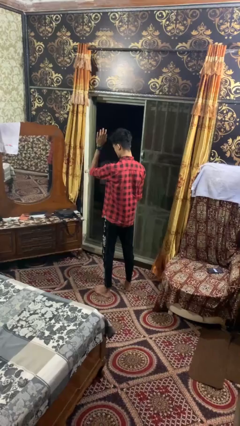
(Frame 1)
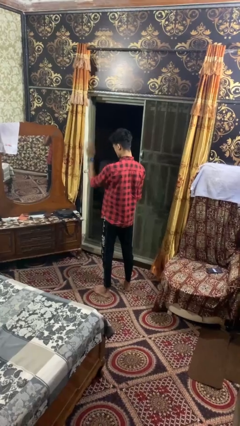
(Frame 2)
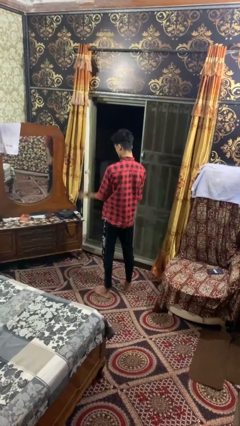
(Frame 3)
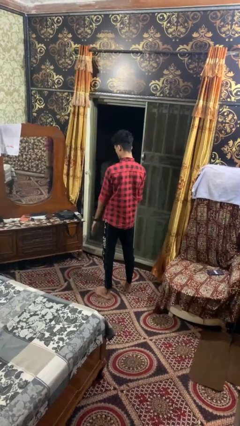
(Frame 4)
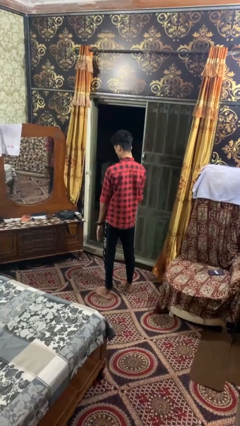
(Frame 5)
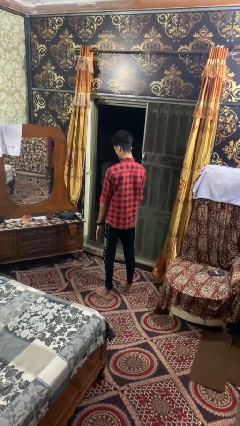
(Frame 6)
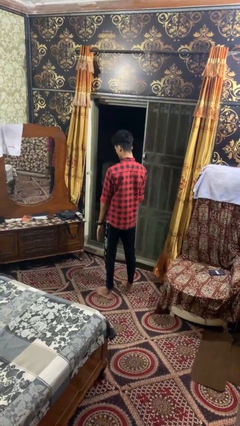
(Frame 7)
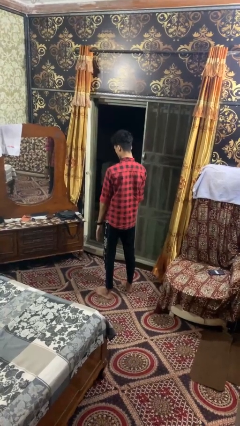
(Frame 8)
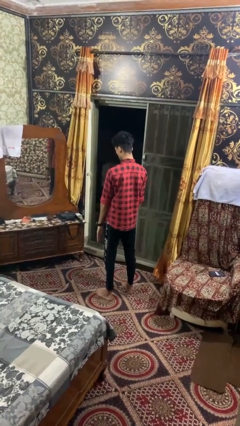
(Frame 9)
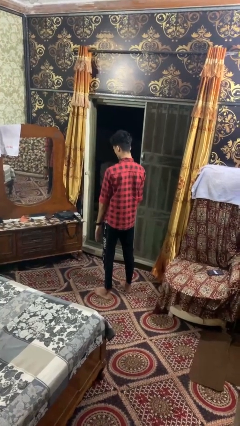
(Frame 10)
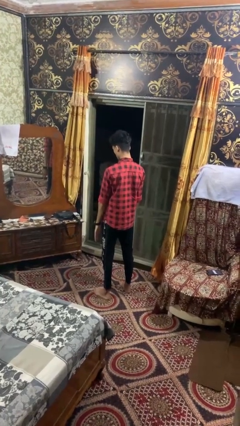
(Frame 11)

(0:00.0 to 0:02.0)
person gestures lower hand

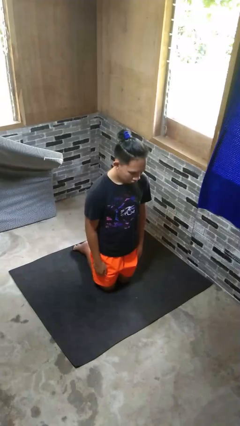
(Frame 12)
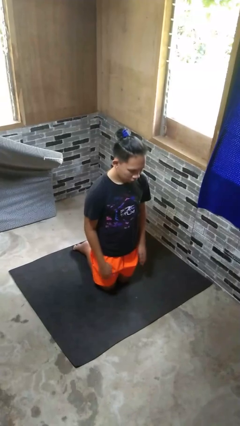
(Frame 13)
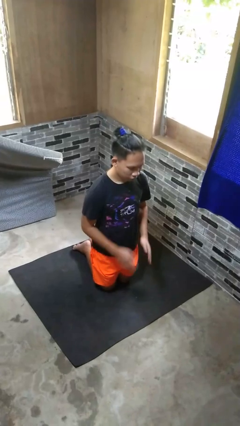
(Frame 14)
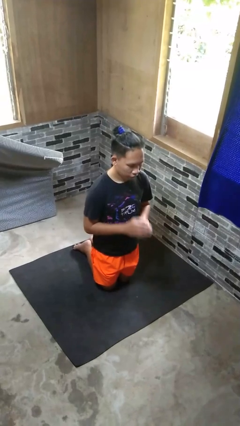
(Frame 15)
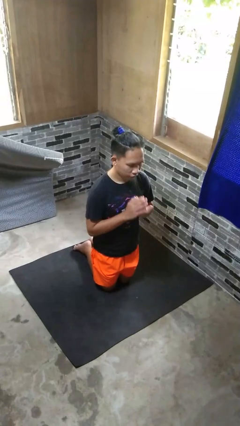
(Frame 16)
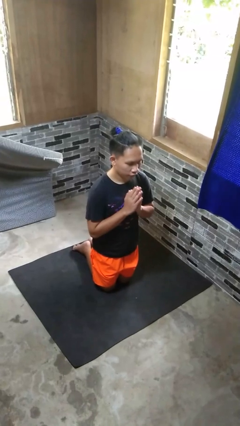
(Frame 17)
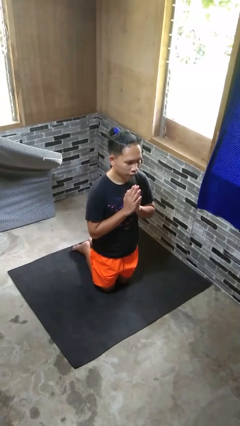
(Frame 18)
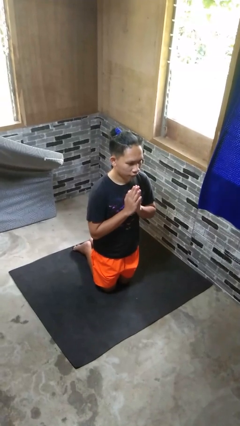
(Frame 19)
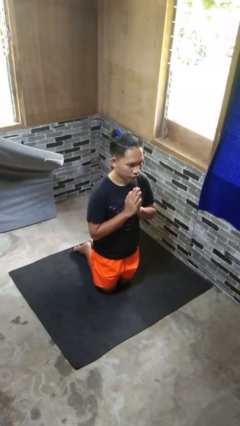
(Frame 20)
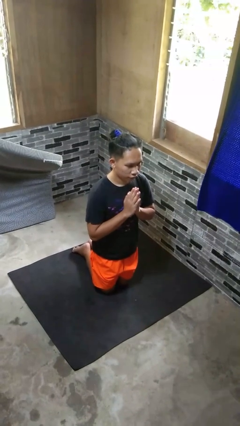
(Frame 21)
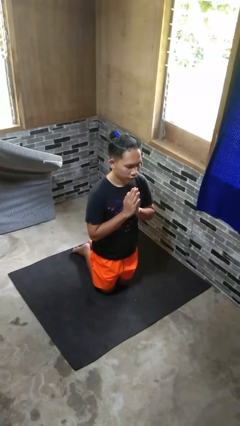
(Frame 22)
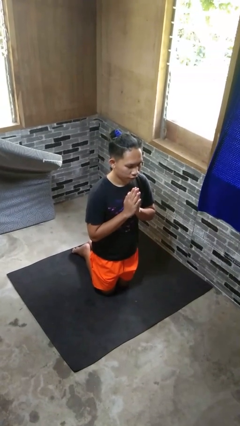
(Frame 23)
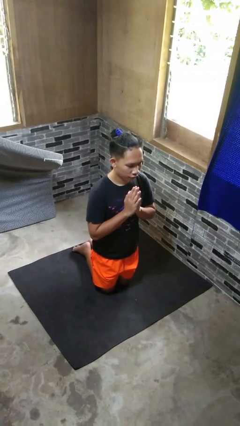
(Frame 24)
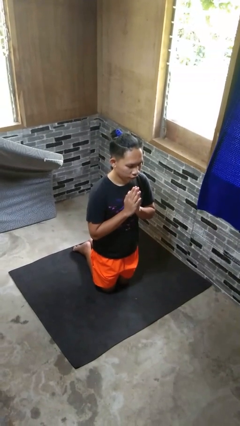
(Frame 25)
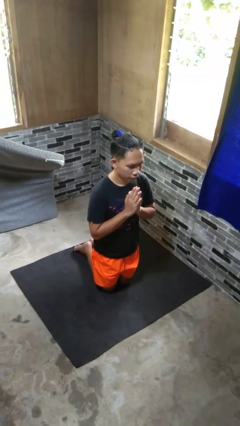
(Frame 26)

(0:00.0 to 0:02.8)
person prays

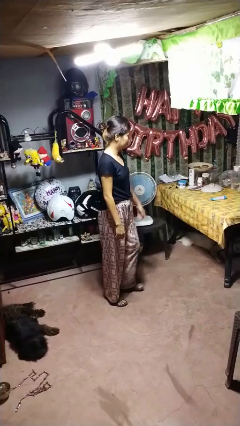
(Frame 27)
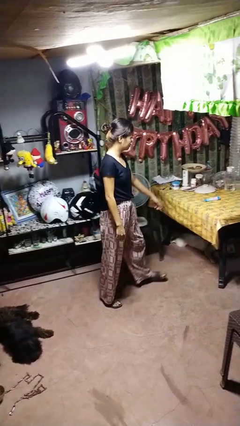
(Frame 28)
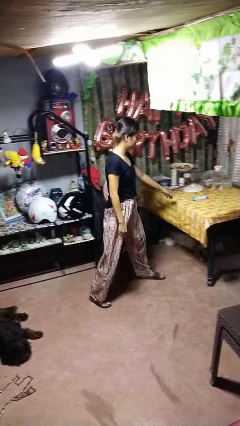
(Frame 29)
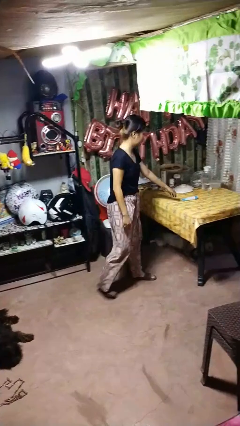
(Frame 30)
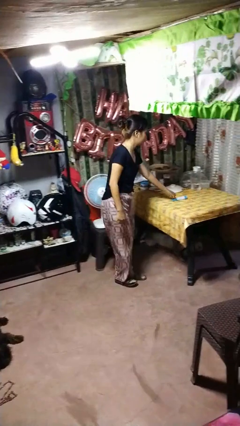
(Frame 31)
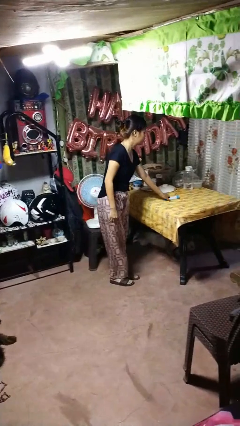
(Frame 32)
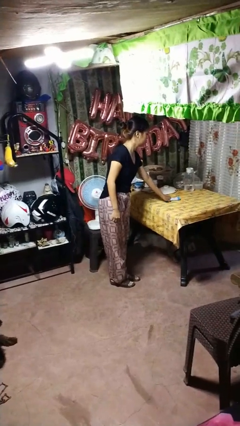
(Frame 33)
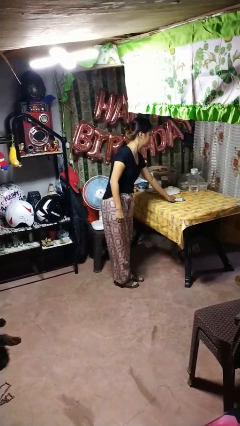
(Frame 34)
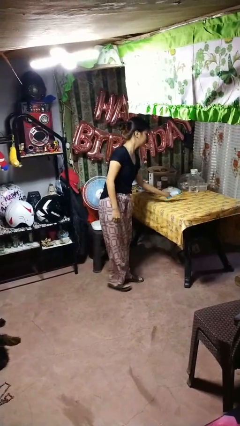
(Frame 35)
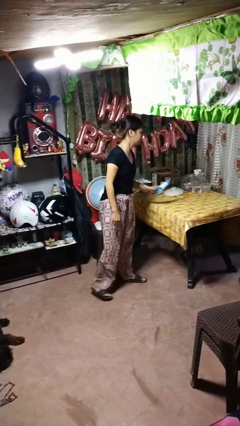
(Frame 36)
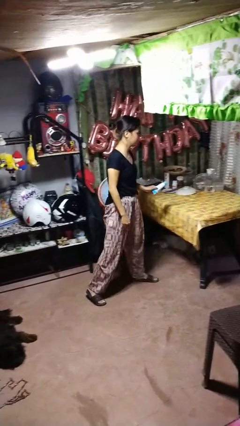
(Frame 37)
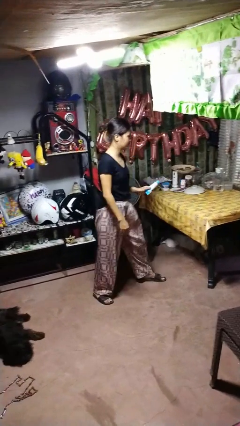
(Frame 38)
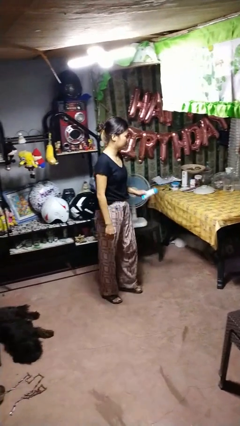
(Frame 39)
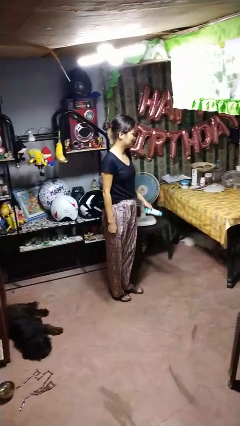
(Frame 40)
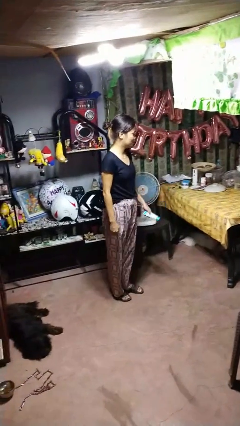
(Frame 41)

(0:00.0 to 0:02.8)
person picks up object from table

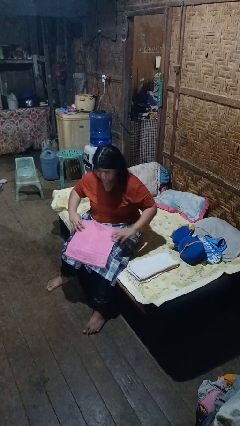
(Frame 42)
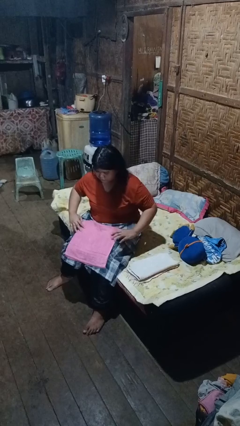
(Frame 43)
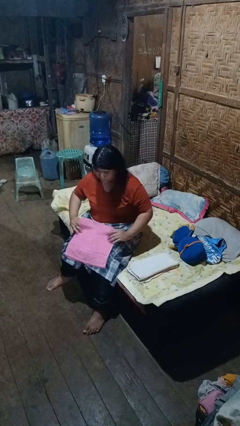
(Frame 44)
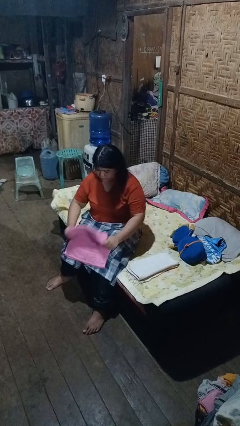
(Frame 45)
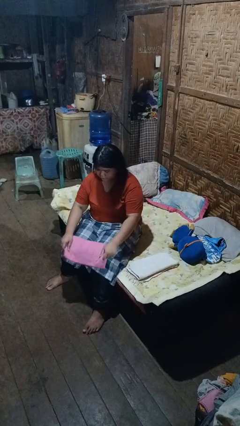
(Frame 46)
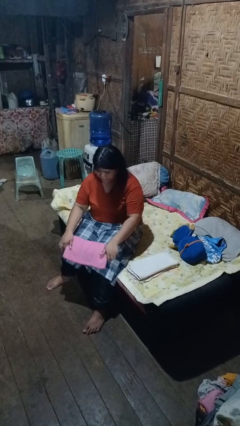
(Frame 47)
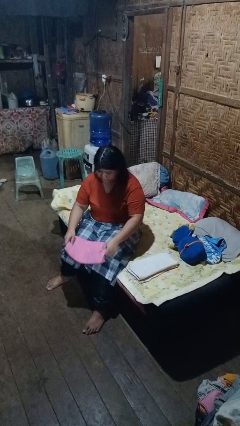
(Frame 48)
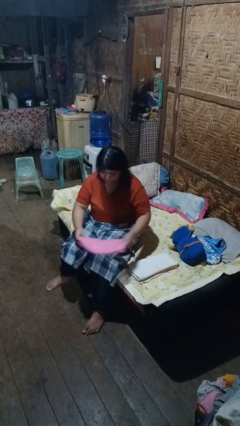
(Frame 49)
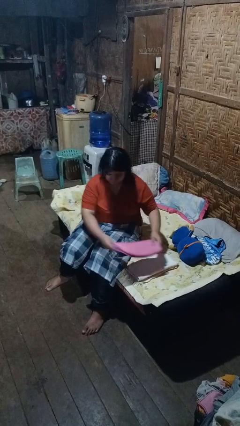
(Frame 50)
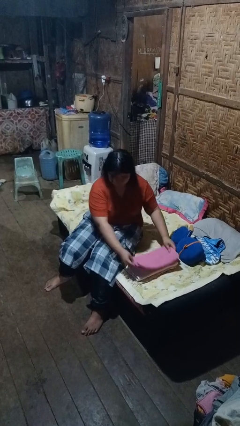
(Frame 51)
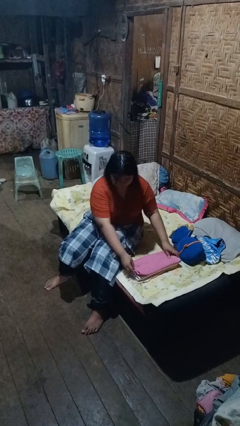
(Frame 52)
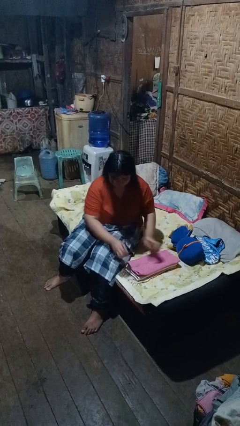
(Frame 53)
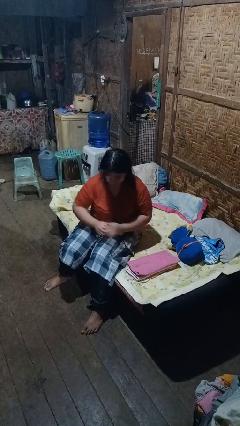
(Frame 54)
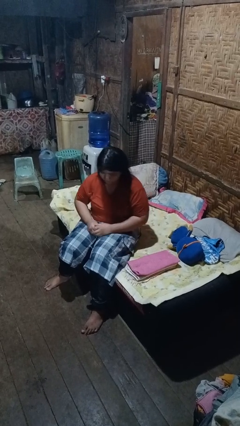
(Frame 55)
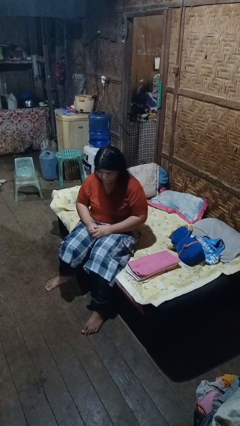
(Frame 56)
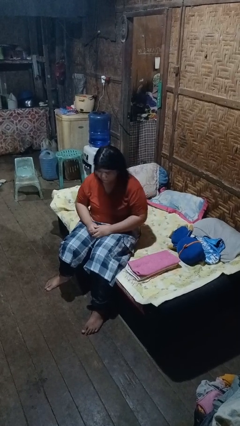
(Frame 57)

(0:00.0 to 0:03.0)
person folds towel

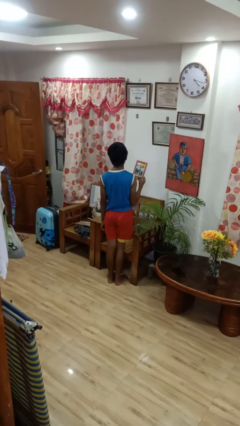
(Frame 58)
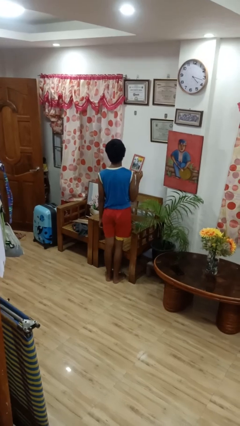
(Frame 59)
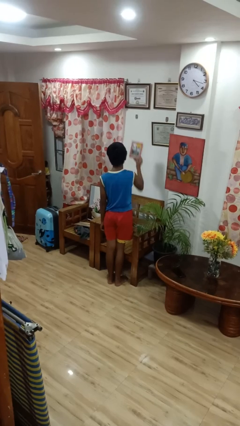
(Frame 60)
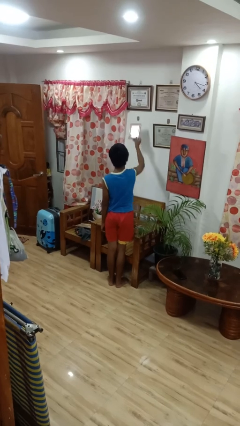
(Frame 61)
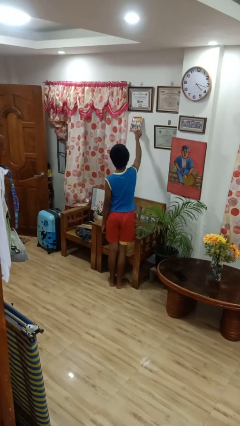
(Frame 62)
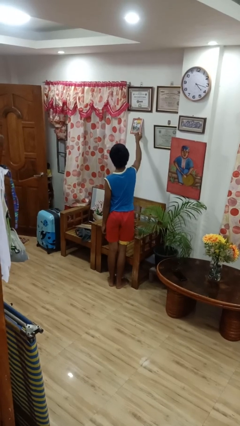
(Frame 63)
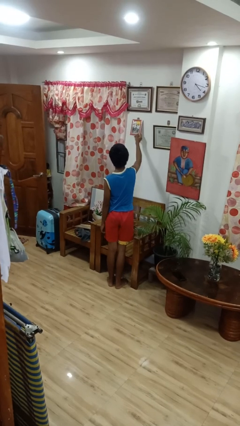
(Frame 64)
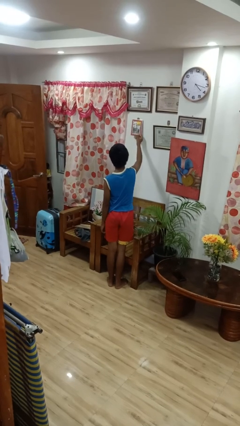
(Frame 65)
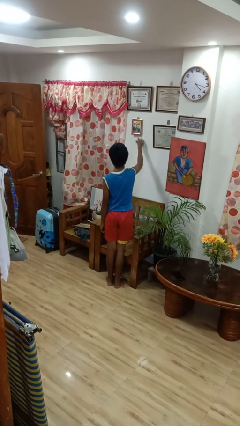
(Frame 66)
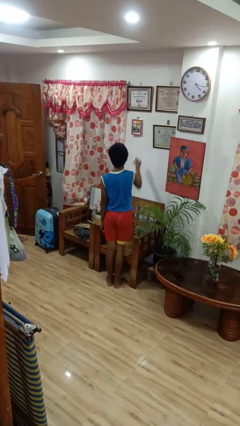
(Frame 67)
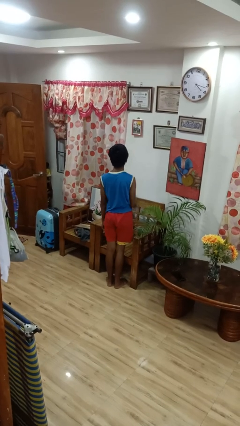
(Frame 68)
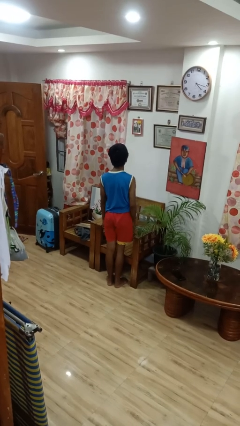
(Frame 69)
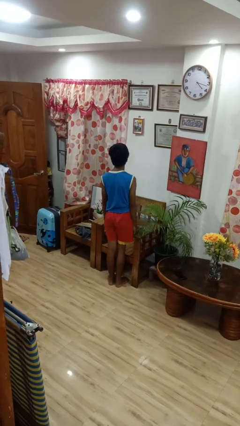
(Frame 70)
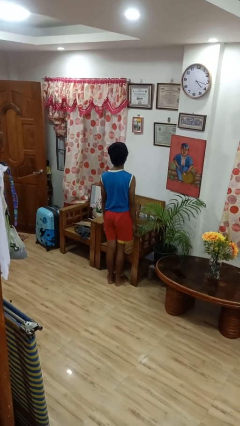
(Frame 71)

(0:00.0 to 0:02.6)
person puts up picture frame

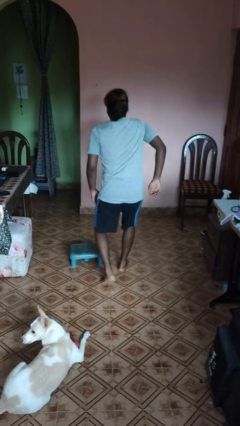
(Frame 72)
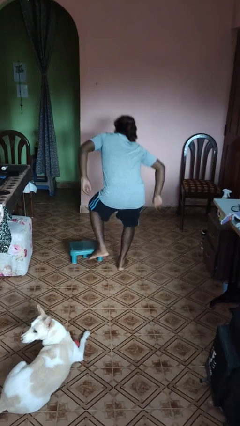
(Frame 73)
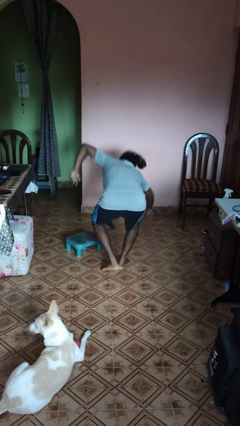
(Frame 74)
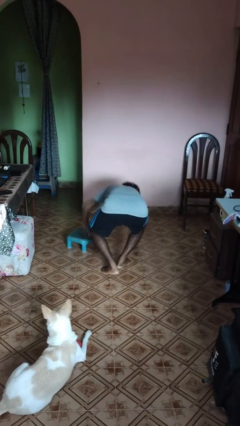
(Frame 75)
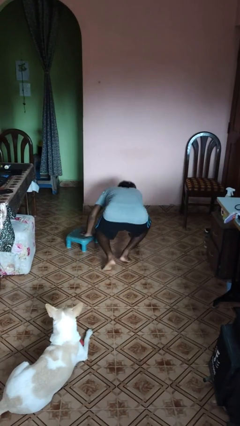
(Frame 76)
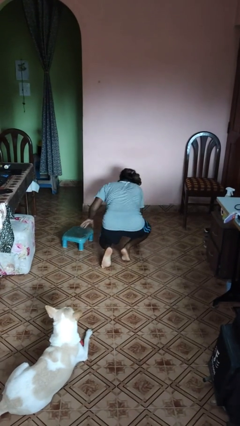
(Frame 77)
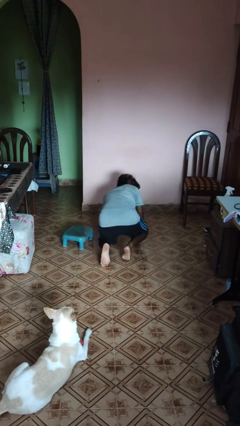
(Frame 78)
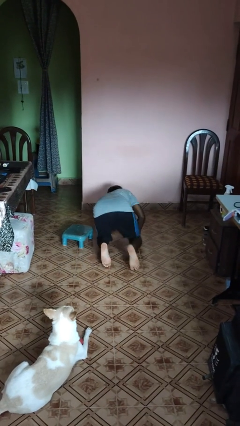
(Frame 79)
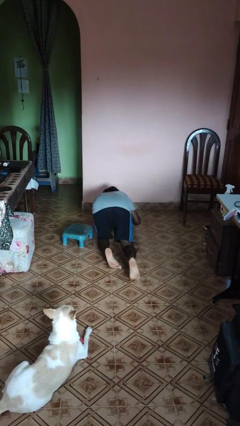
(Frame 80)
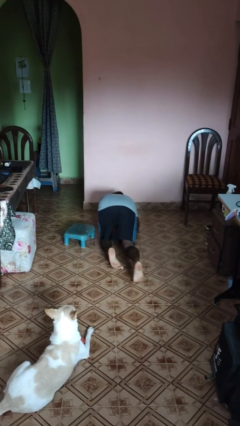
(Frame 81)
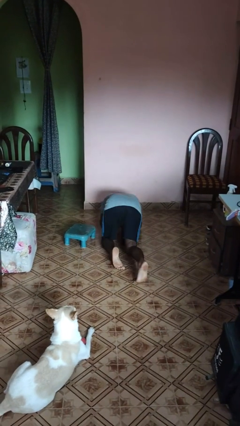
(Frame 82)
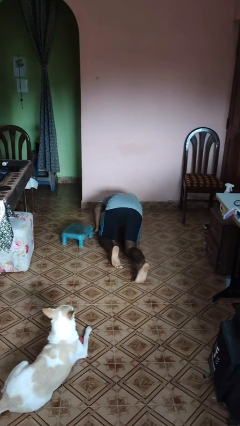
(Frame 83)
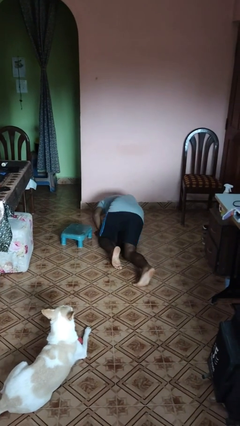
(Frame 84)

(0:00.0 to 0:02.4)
person trips on object on floor

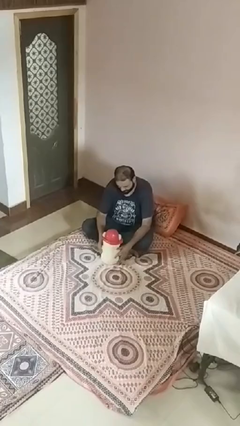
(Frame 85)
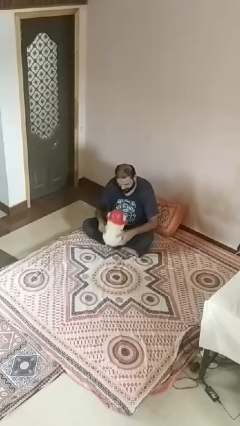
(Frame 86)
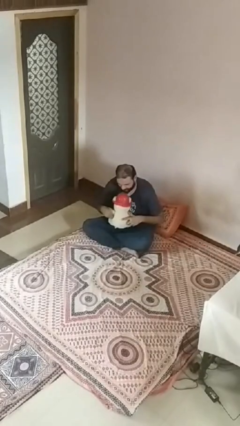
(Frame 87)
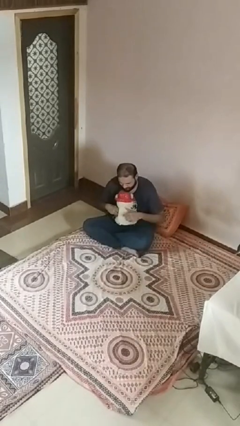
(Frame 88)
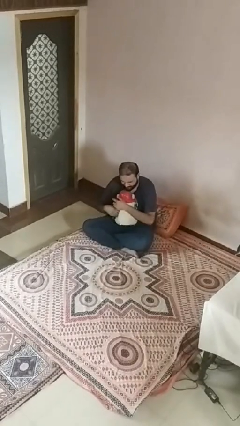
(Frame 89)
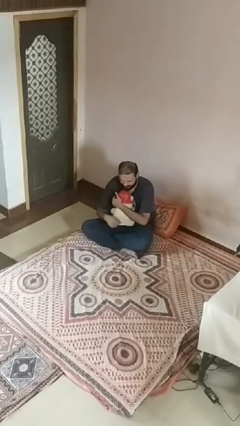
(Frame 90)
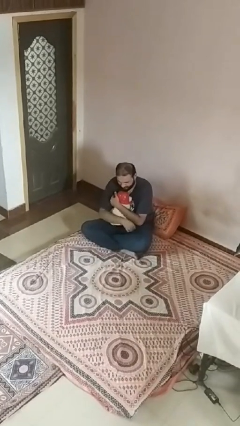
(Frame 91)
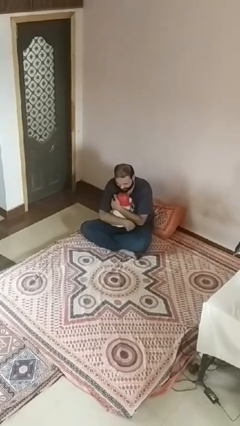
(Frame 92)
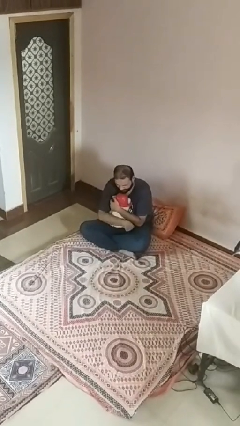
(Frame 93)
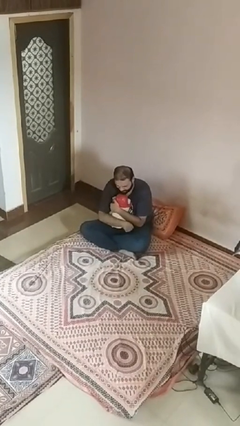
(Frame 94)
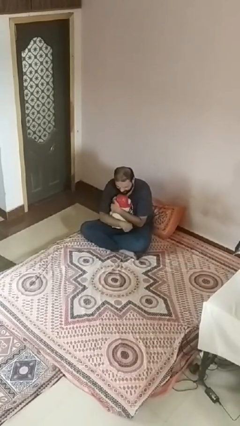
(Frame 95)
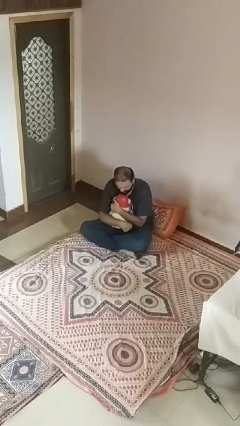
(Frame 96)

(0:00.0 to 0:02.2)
person hugs stuffed animal
